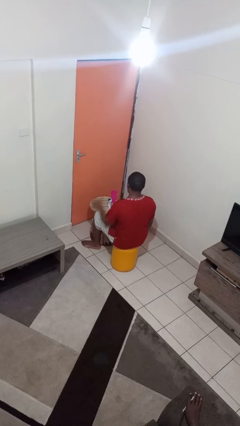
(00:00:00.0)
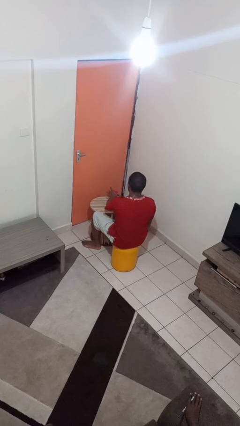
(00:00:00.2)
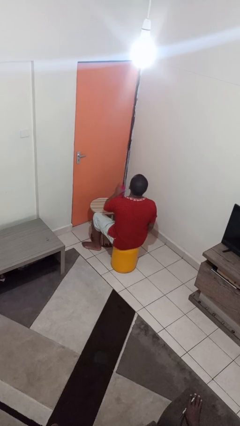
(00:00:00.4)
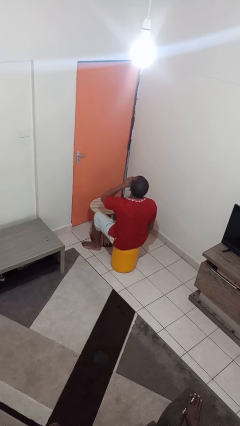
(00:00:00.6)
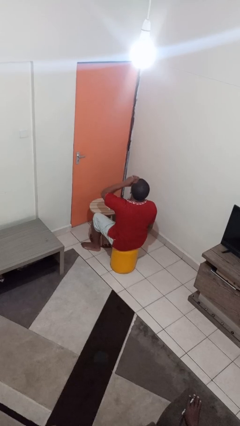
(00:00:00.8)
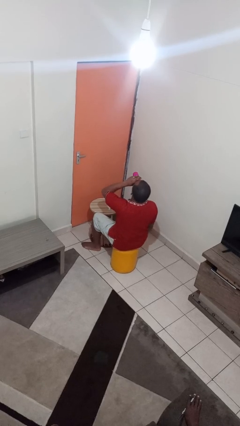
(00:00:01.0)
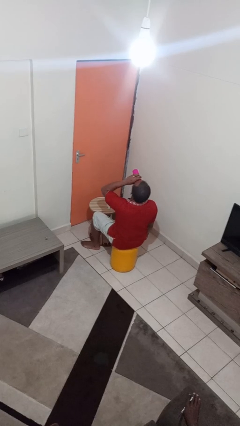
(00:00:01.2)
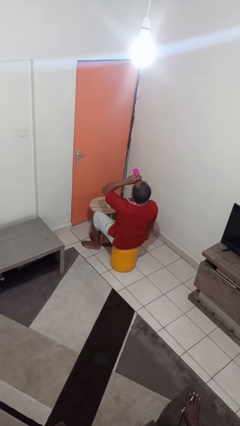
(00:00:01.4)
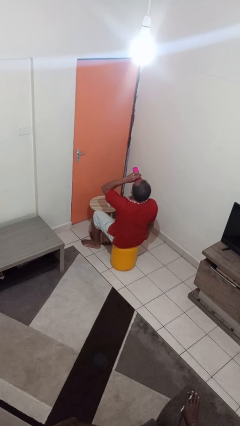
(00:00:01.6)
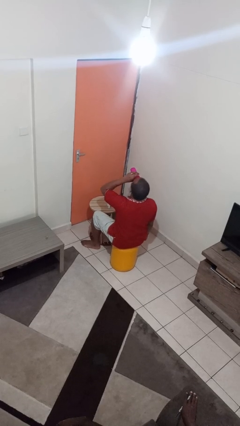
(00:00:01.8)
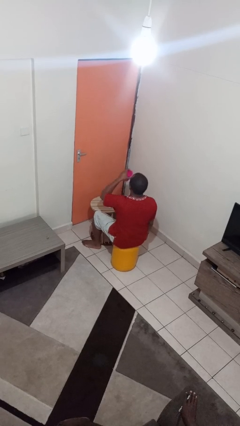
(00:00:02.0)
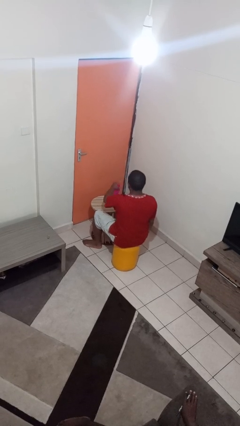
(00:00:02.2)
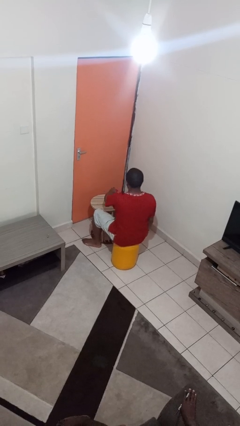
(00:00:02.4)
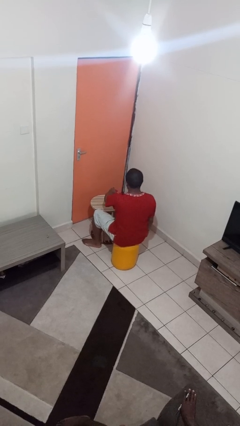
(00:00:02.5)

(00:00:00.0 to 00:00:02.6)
person drinks from cup

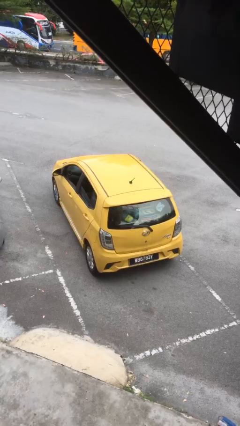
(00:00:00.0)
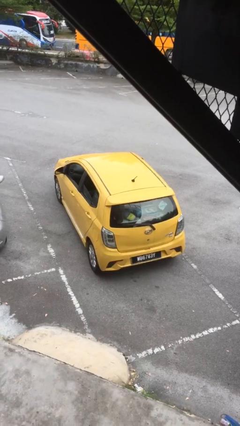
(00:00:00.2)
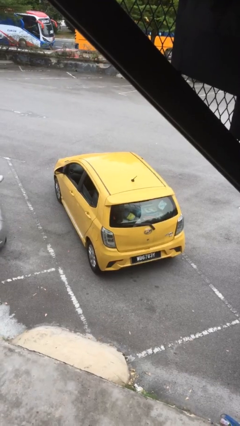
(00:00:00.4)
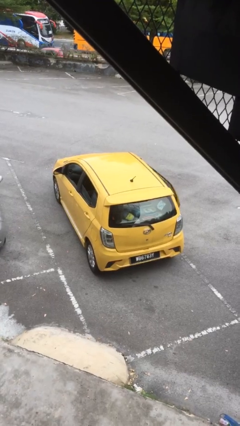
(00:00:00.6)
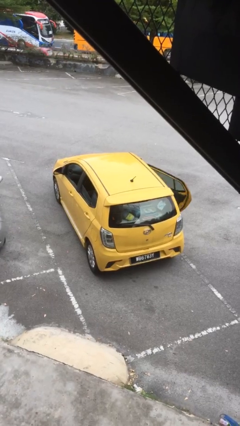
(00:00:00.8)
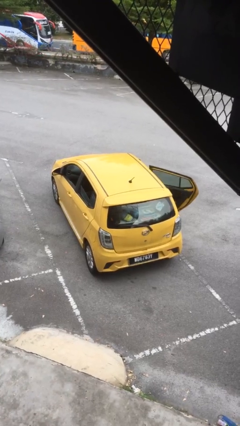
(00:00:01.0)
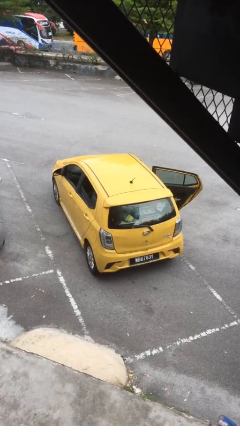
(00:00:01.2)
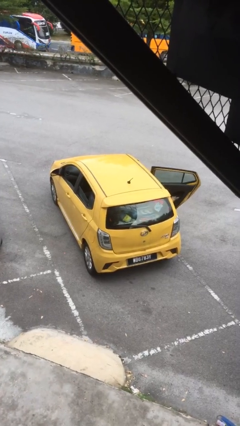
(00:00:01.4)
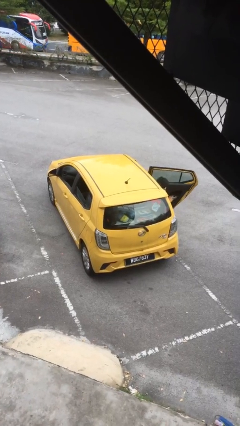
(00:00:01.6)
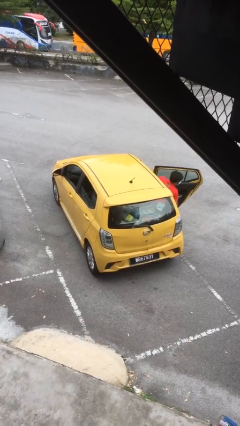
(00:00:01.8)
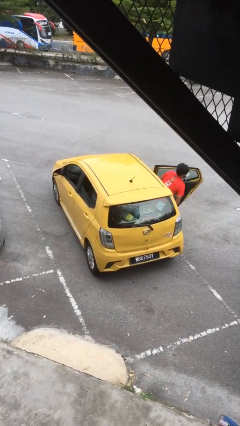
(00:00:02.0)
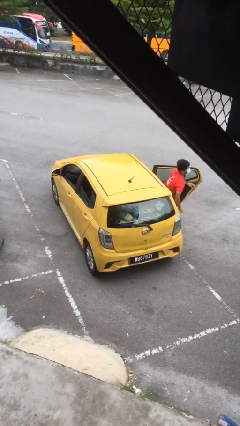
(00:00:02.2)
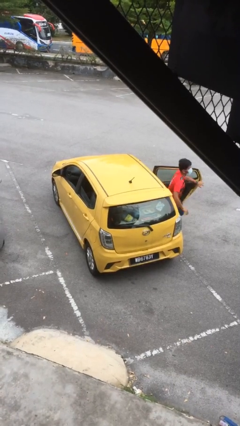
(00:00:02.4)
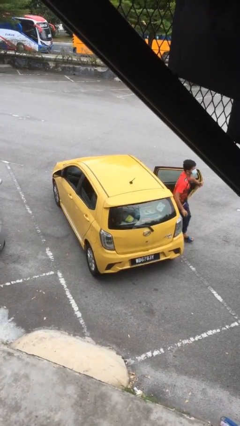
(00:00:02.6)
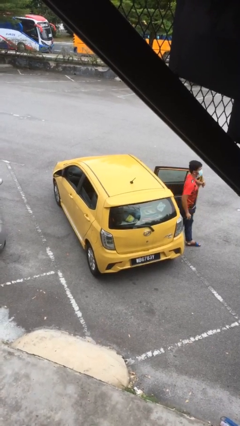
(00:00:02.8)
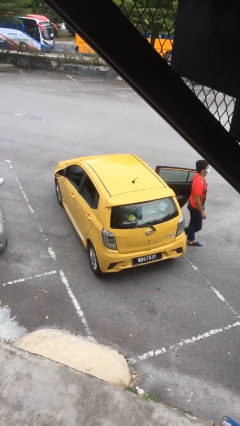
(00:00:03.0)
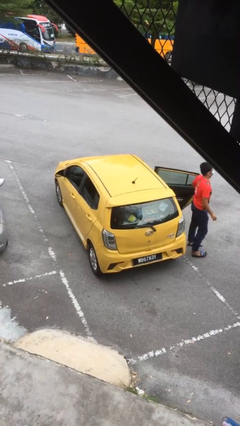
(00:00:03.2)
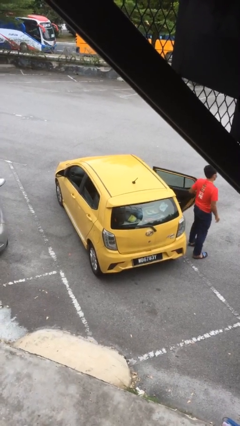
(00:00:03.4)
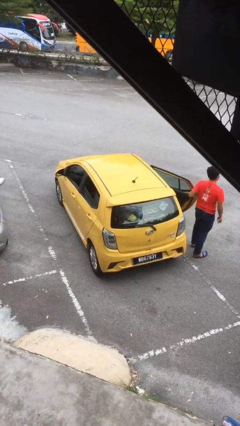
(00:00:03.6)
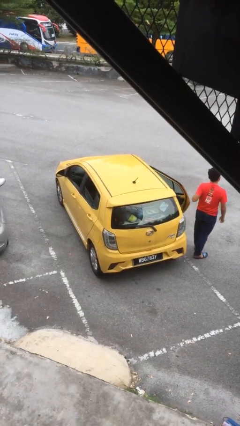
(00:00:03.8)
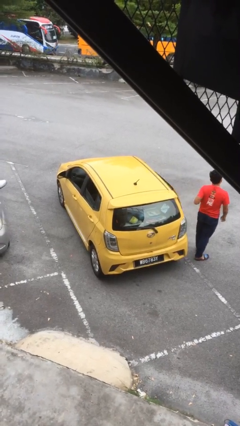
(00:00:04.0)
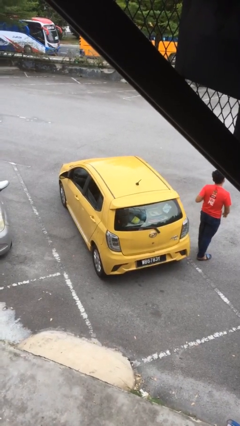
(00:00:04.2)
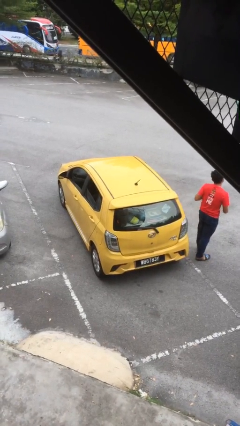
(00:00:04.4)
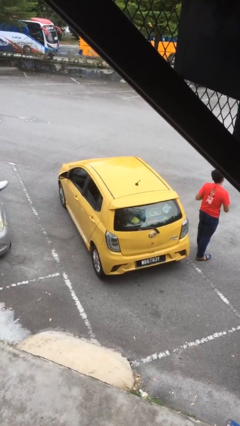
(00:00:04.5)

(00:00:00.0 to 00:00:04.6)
car drops off person

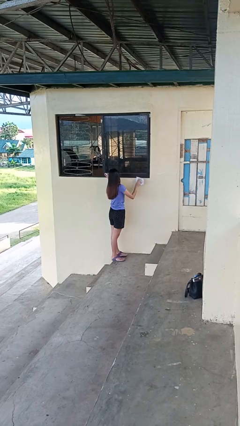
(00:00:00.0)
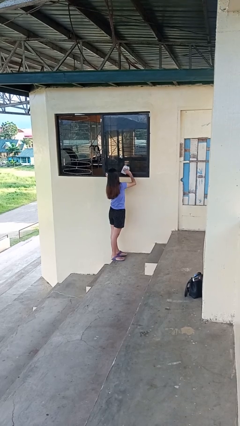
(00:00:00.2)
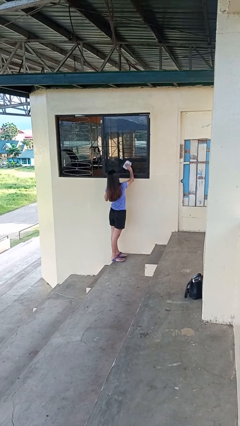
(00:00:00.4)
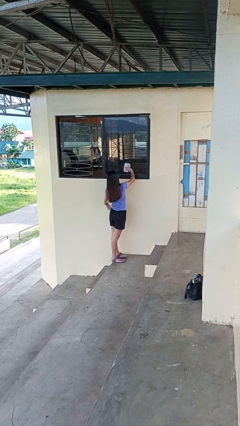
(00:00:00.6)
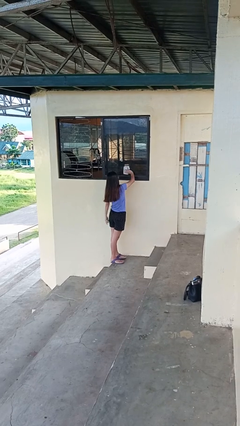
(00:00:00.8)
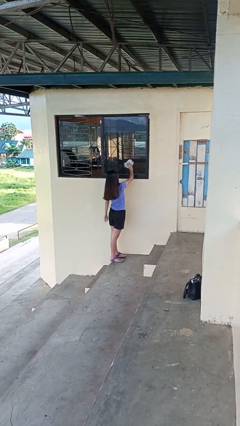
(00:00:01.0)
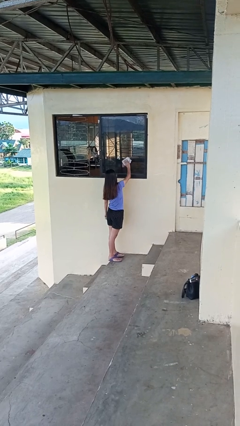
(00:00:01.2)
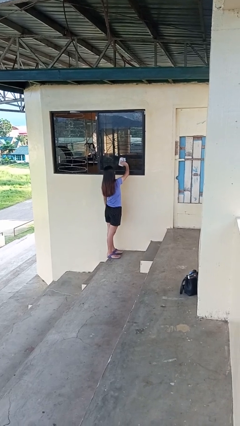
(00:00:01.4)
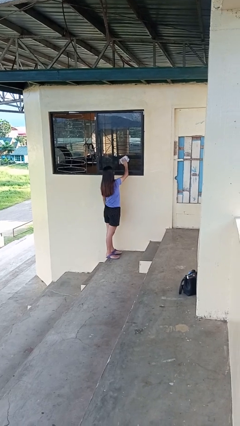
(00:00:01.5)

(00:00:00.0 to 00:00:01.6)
person washes window

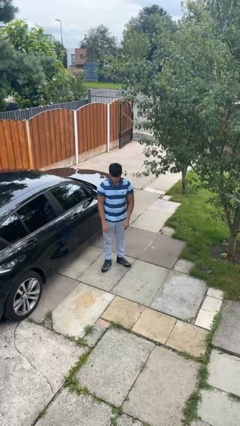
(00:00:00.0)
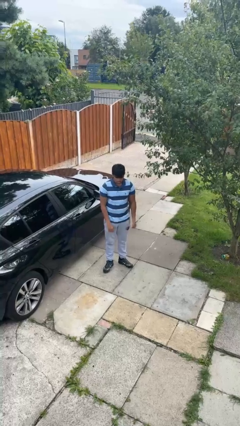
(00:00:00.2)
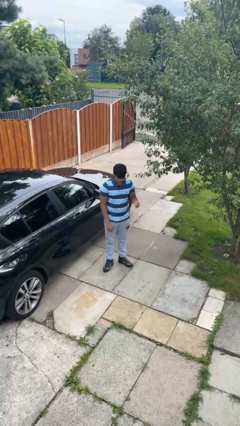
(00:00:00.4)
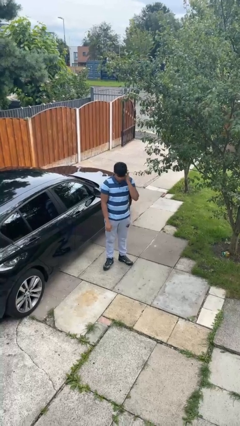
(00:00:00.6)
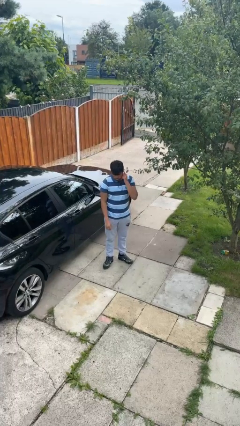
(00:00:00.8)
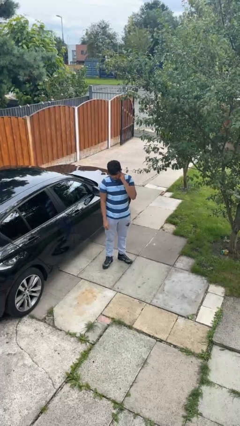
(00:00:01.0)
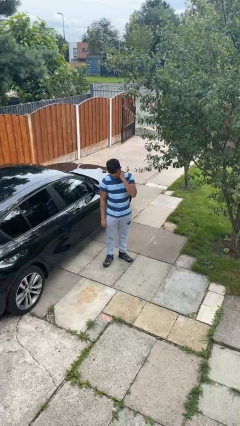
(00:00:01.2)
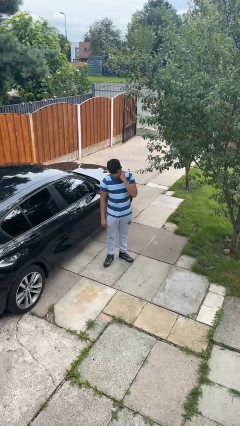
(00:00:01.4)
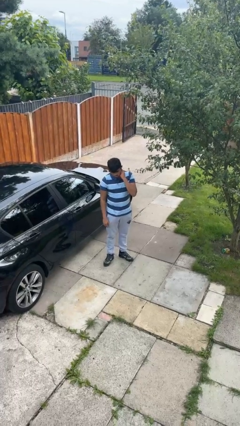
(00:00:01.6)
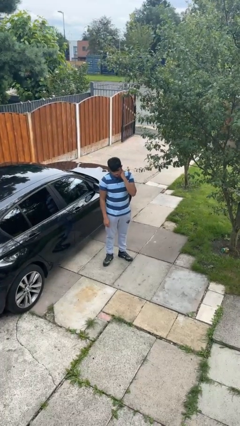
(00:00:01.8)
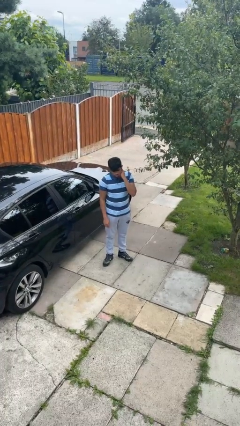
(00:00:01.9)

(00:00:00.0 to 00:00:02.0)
person puts fingers in ear

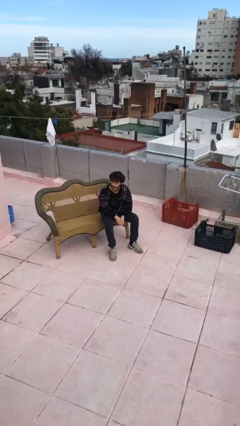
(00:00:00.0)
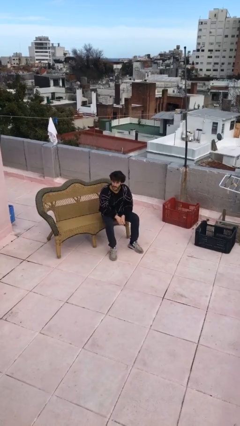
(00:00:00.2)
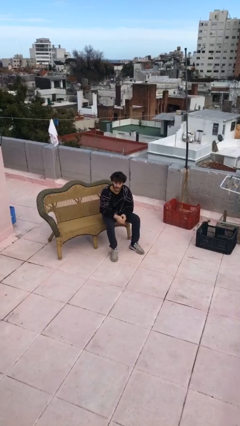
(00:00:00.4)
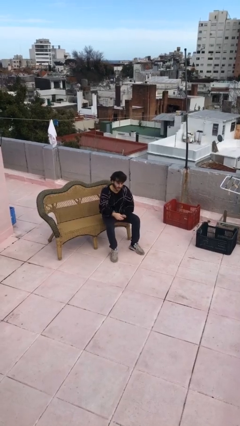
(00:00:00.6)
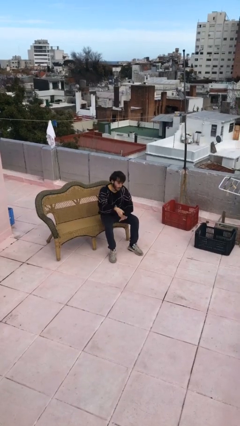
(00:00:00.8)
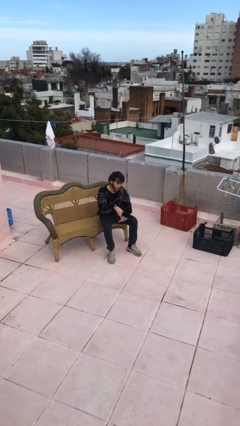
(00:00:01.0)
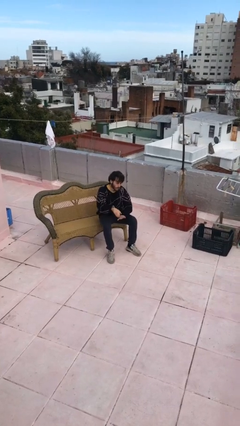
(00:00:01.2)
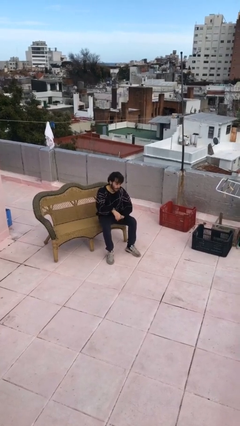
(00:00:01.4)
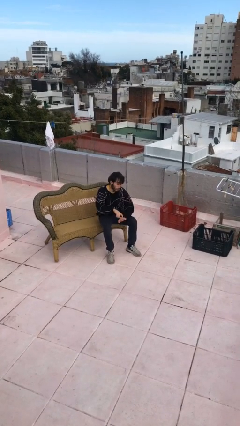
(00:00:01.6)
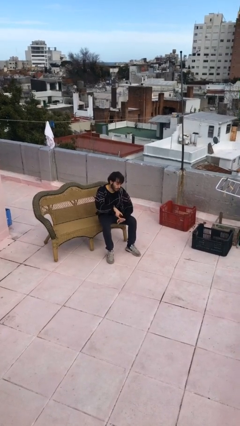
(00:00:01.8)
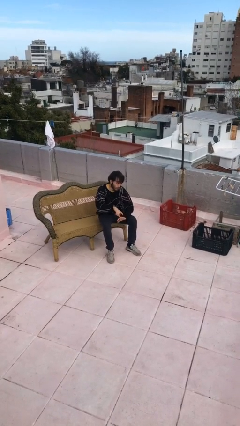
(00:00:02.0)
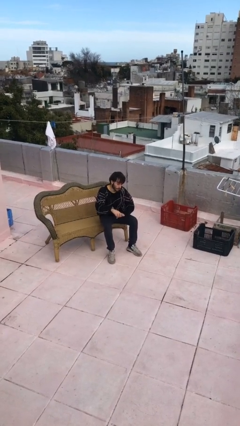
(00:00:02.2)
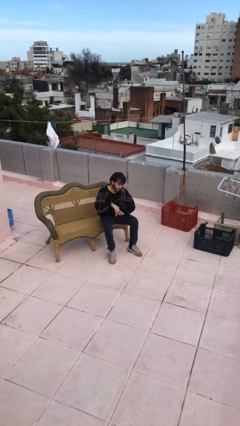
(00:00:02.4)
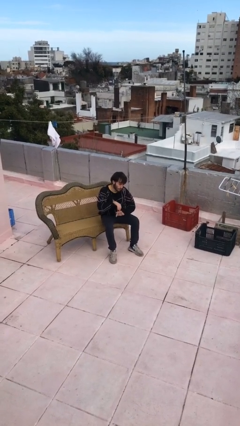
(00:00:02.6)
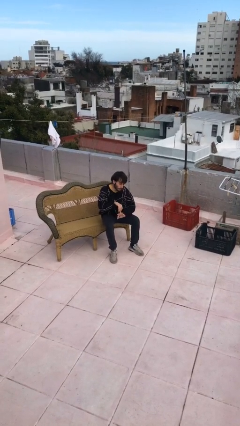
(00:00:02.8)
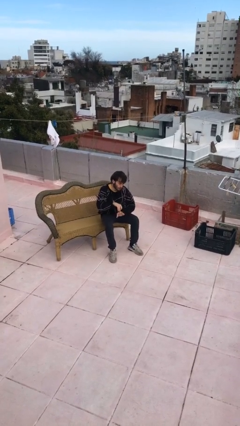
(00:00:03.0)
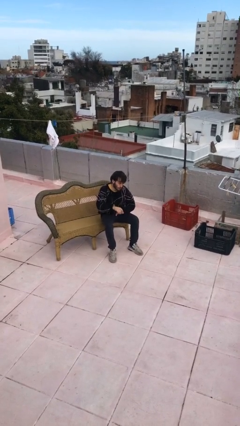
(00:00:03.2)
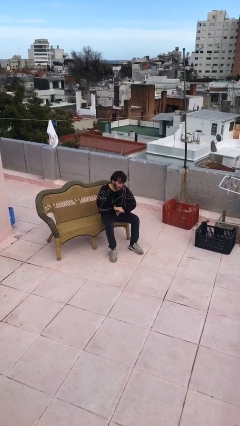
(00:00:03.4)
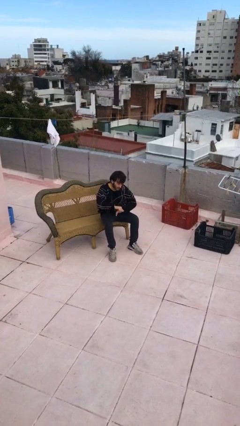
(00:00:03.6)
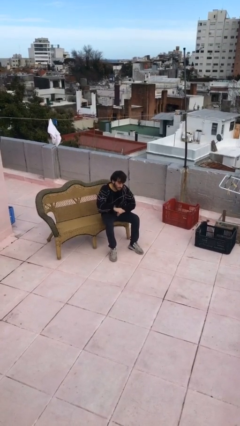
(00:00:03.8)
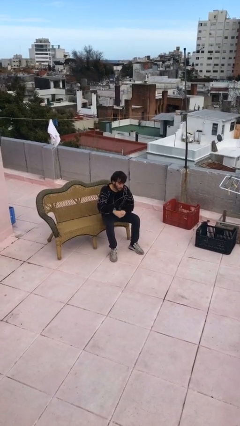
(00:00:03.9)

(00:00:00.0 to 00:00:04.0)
person cracks knuckles

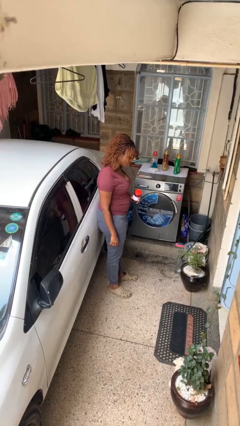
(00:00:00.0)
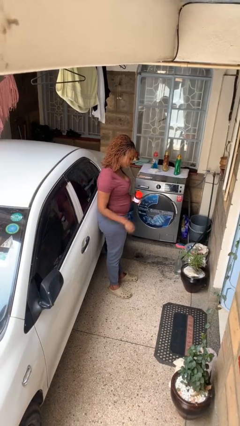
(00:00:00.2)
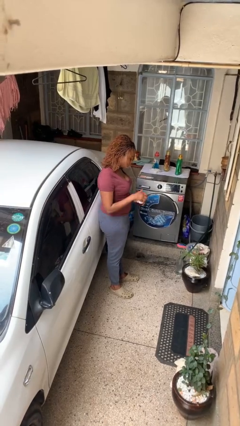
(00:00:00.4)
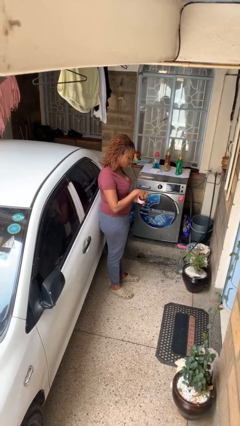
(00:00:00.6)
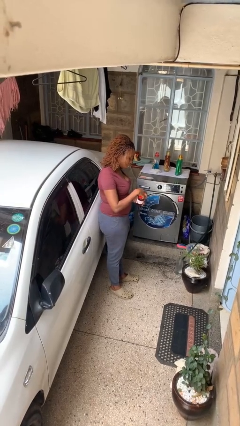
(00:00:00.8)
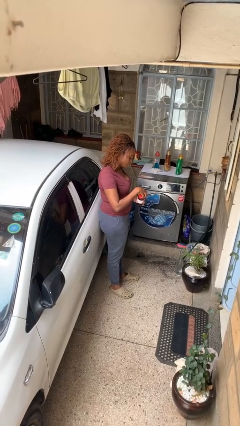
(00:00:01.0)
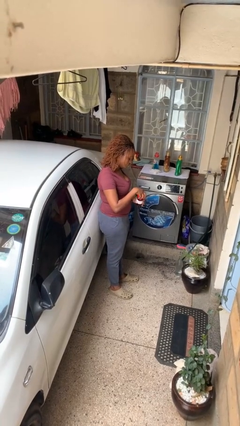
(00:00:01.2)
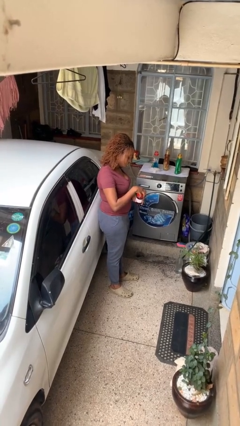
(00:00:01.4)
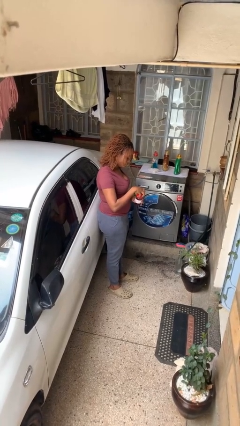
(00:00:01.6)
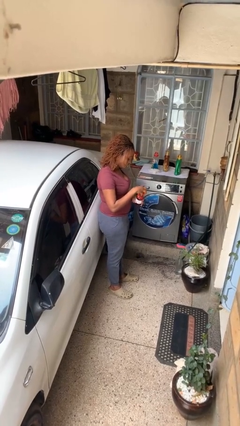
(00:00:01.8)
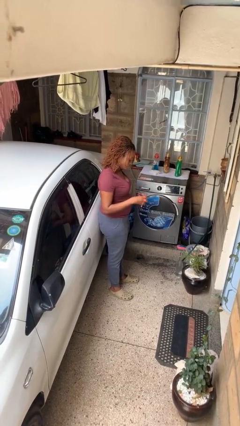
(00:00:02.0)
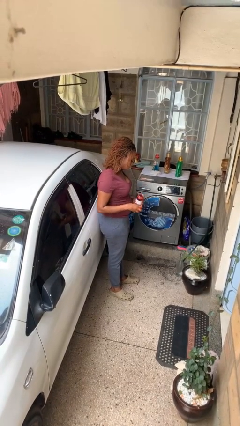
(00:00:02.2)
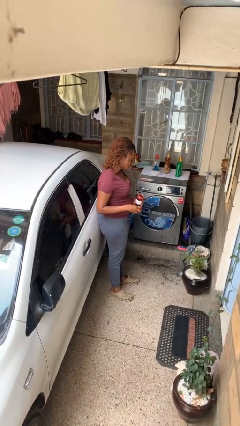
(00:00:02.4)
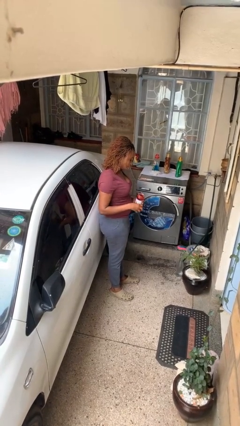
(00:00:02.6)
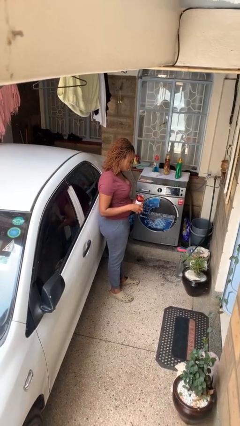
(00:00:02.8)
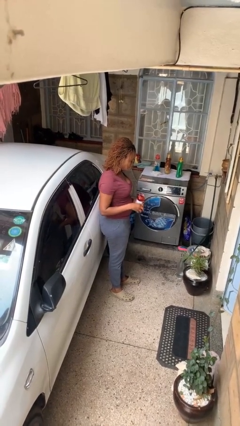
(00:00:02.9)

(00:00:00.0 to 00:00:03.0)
person opens jar
